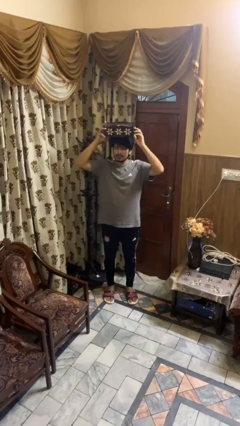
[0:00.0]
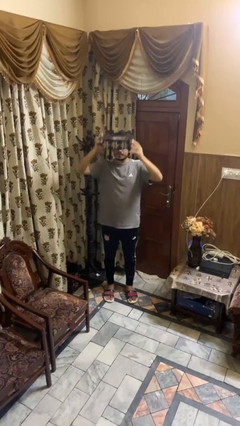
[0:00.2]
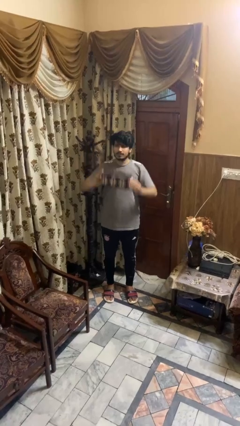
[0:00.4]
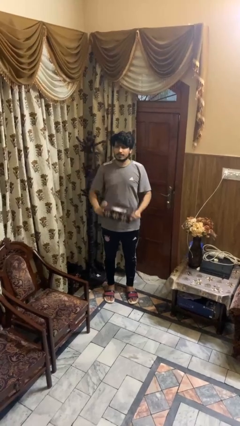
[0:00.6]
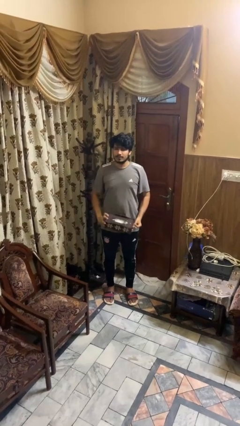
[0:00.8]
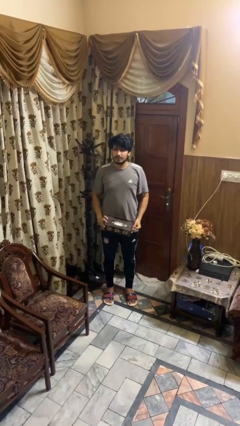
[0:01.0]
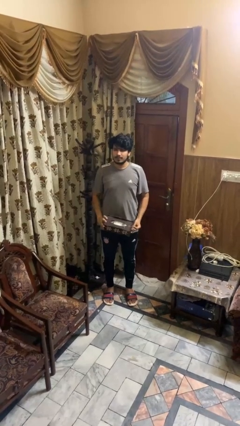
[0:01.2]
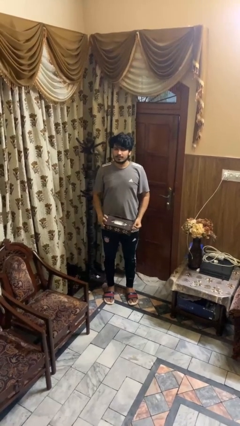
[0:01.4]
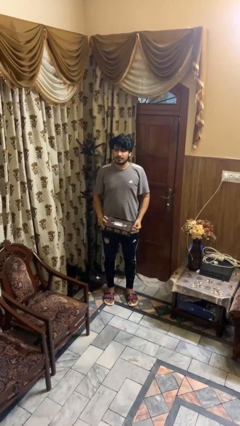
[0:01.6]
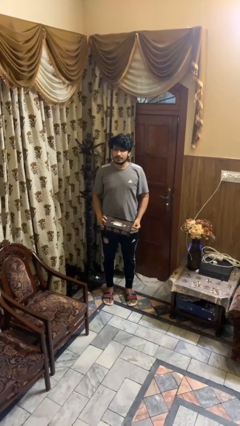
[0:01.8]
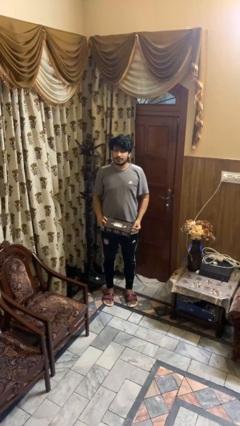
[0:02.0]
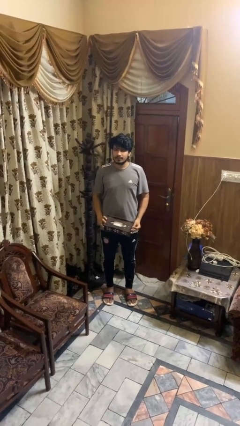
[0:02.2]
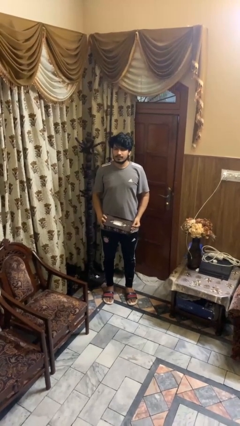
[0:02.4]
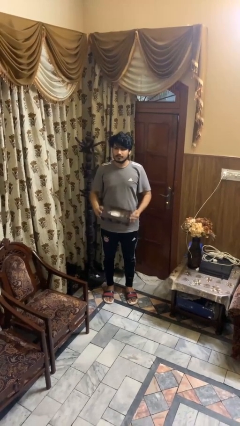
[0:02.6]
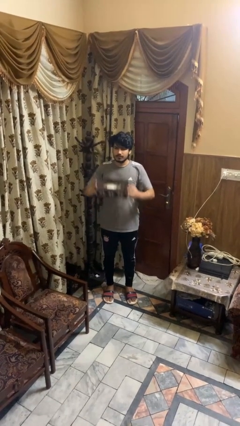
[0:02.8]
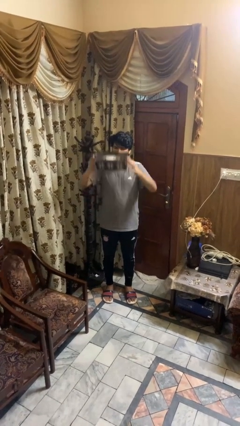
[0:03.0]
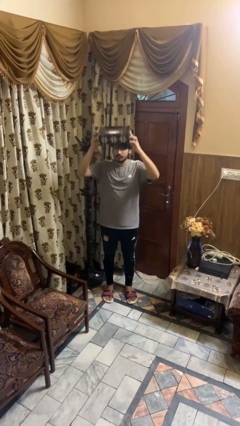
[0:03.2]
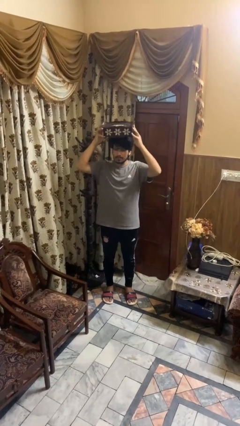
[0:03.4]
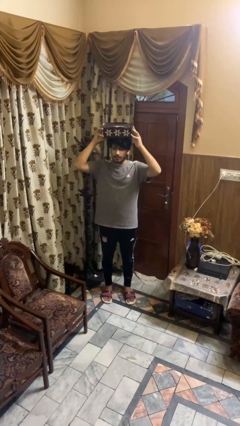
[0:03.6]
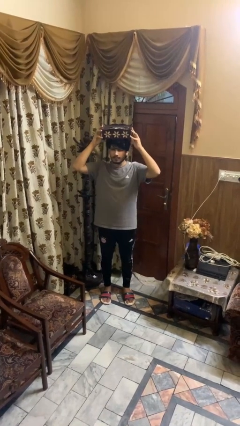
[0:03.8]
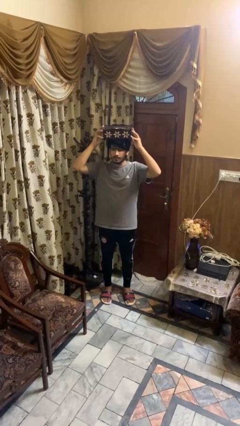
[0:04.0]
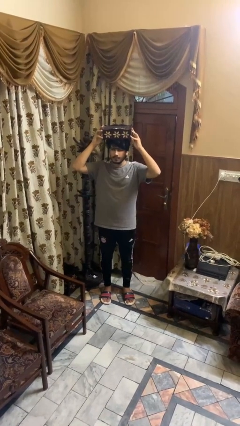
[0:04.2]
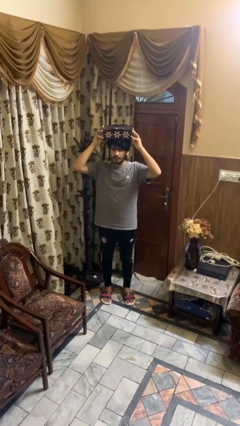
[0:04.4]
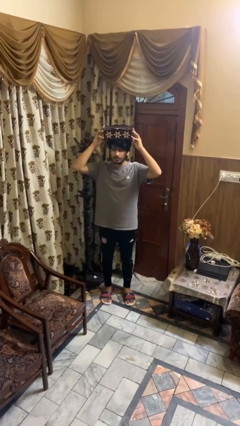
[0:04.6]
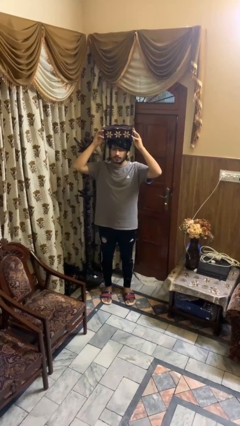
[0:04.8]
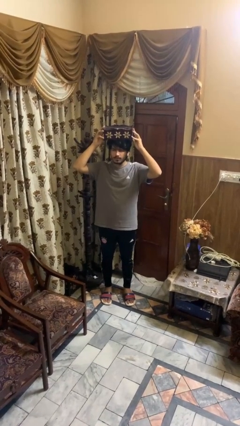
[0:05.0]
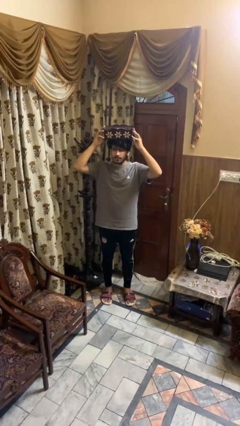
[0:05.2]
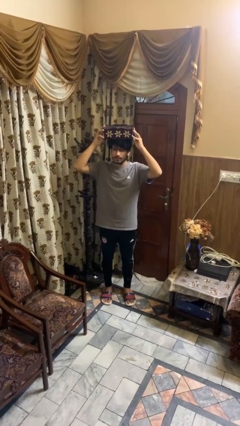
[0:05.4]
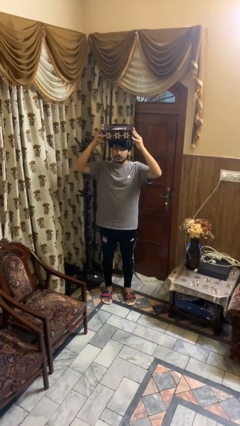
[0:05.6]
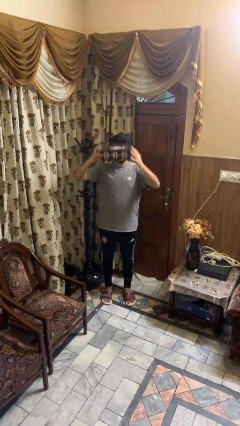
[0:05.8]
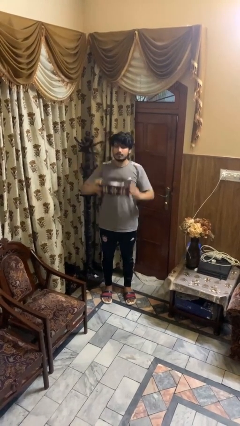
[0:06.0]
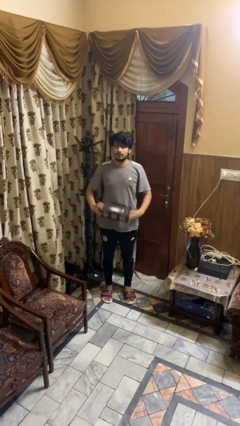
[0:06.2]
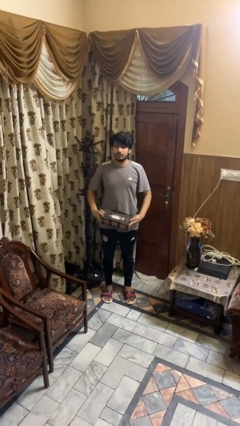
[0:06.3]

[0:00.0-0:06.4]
person holds object above head

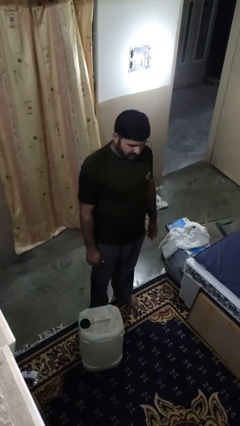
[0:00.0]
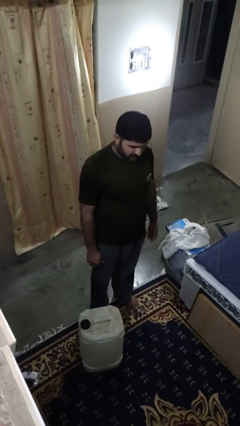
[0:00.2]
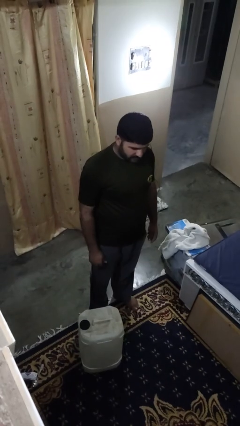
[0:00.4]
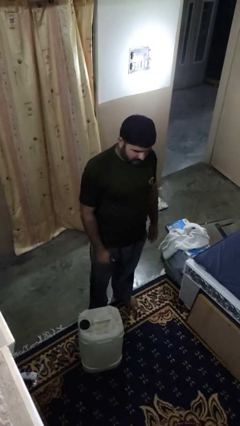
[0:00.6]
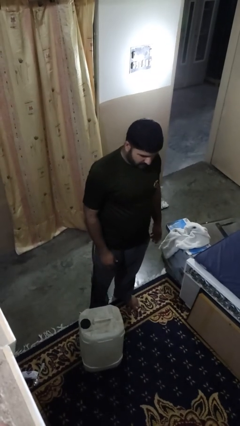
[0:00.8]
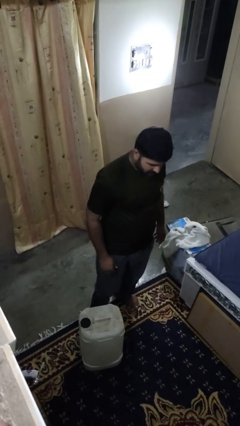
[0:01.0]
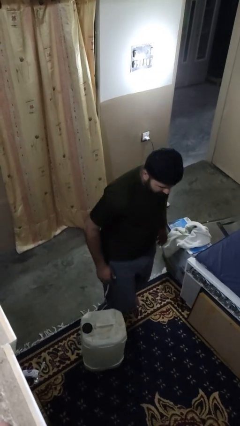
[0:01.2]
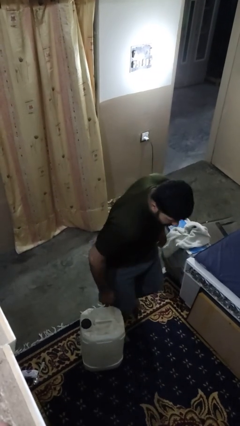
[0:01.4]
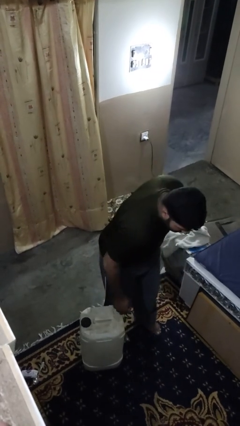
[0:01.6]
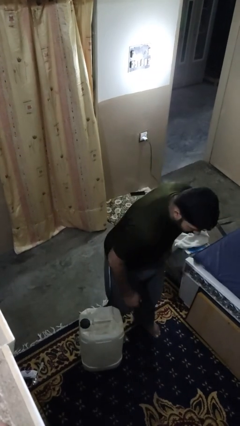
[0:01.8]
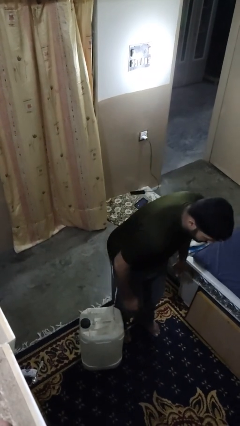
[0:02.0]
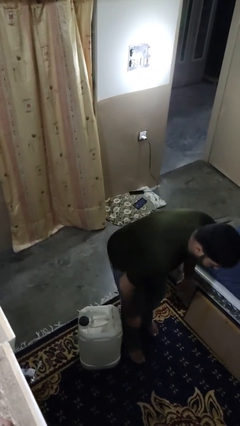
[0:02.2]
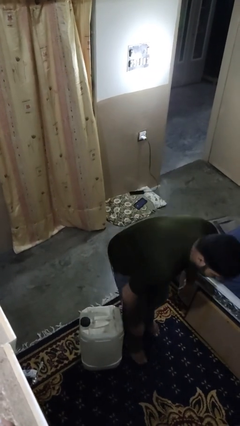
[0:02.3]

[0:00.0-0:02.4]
person trips on object on floor

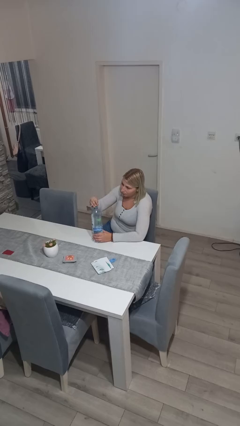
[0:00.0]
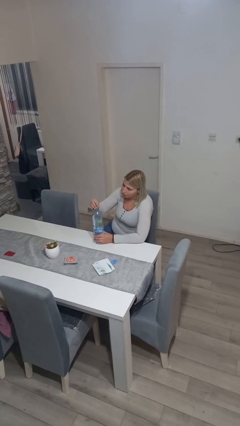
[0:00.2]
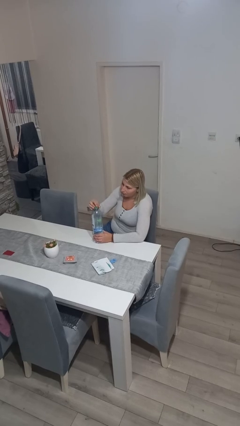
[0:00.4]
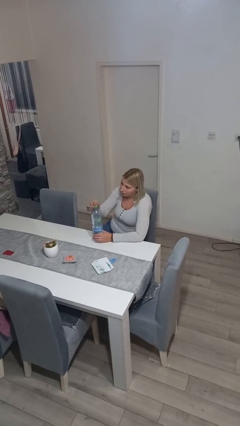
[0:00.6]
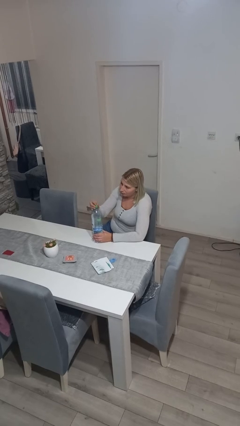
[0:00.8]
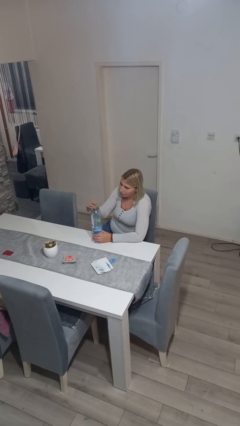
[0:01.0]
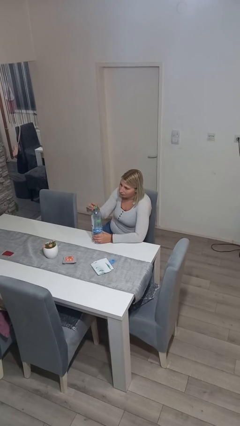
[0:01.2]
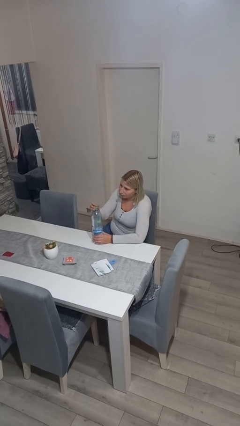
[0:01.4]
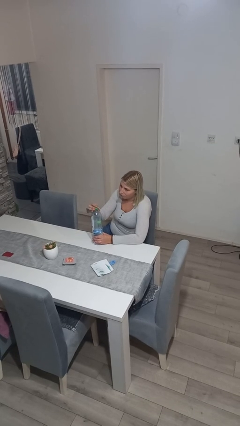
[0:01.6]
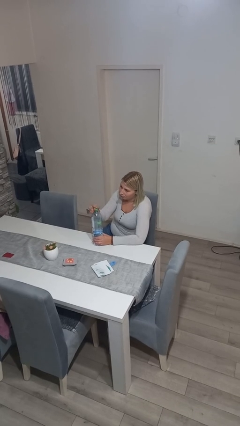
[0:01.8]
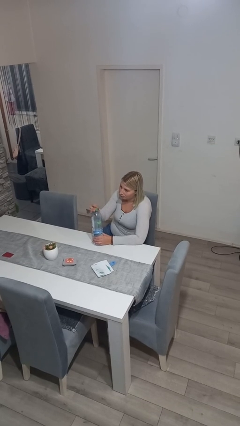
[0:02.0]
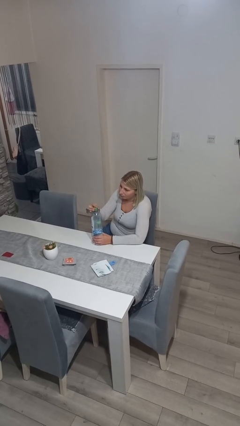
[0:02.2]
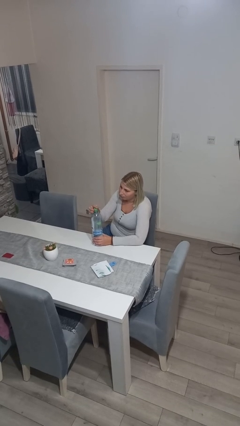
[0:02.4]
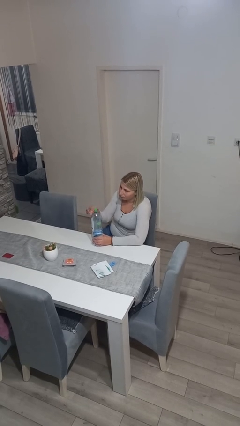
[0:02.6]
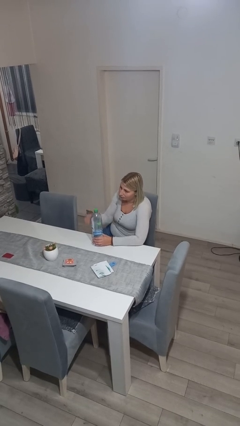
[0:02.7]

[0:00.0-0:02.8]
person screws lid to bottle

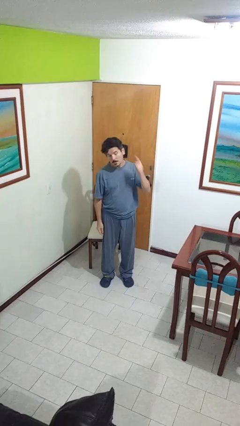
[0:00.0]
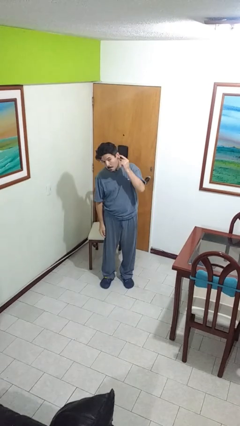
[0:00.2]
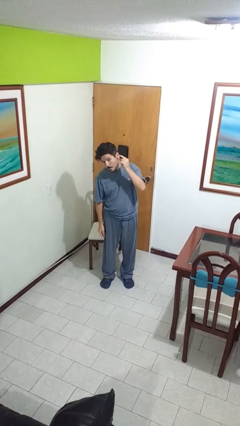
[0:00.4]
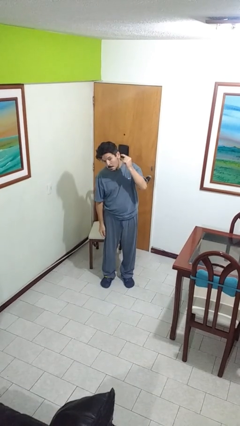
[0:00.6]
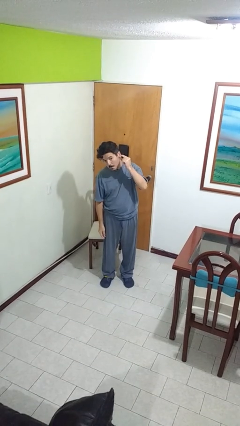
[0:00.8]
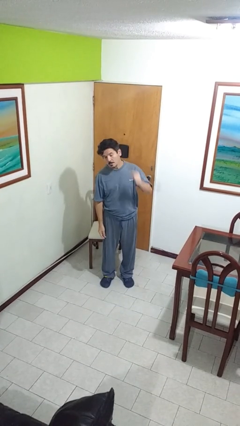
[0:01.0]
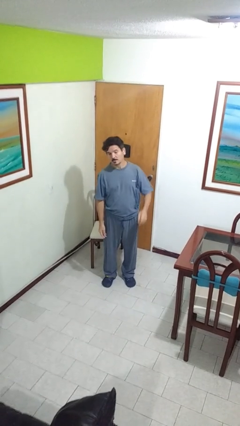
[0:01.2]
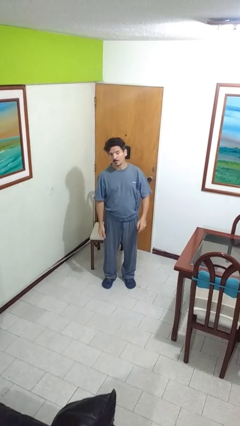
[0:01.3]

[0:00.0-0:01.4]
person gestures listen closely

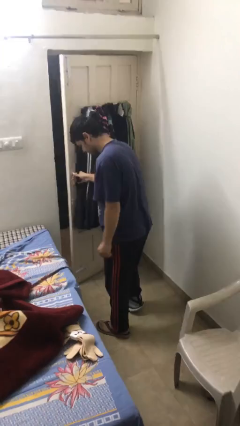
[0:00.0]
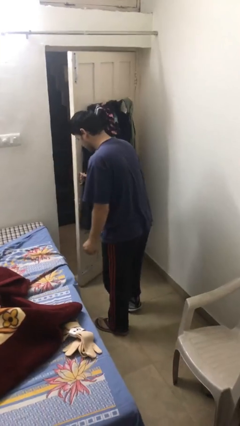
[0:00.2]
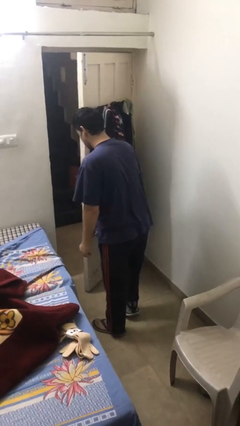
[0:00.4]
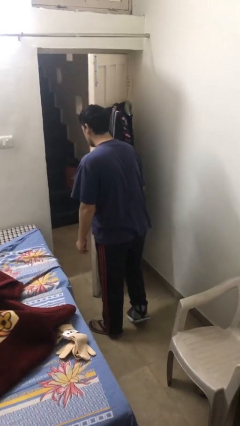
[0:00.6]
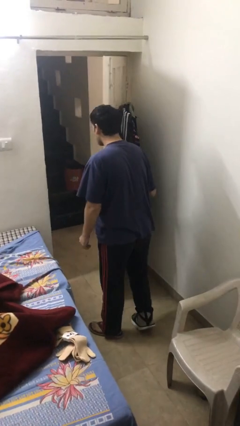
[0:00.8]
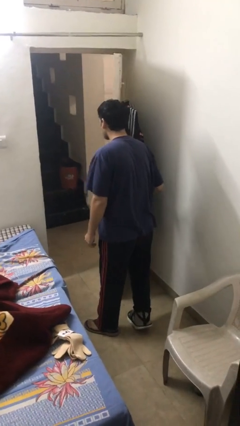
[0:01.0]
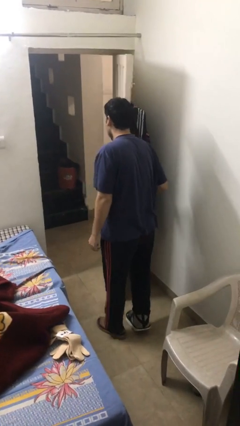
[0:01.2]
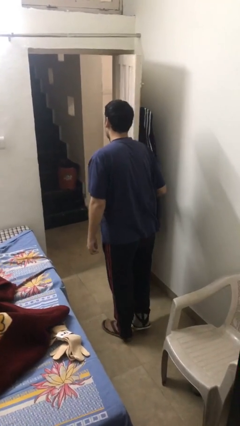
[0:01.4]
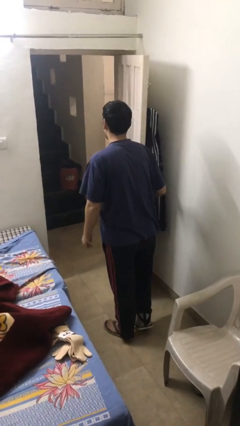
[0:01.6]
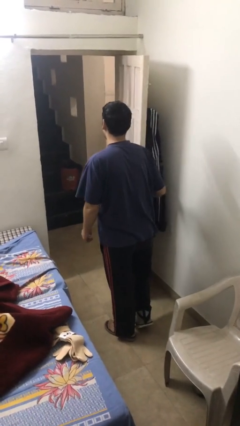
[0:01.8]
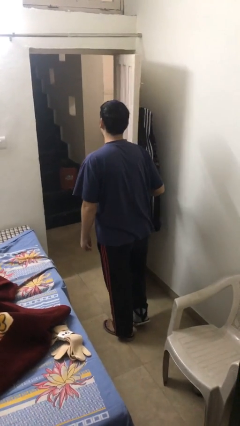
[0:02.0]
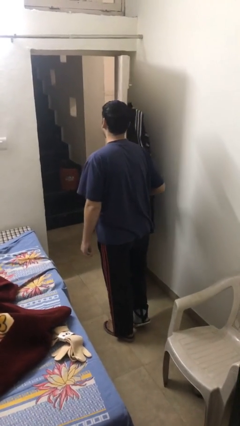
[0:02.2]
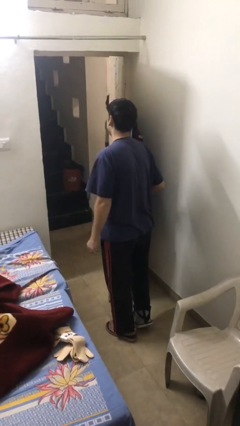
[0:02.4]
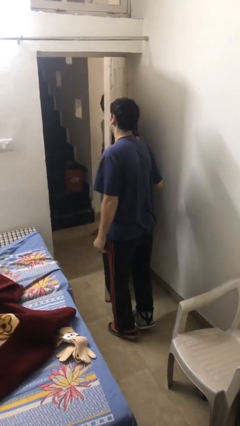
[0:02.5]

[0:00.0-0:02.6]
person opens facility door

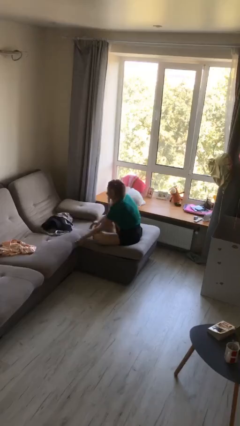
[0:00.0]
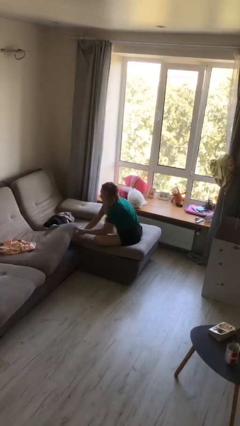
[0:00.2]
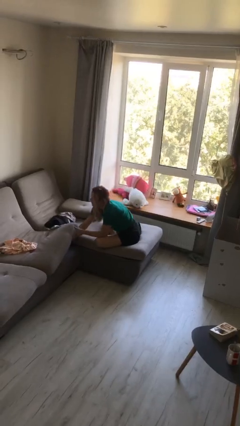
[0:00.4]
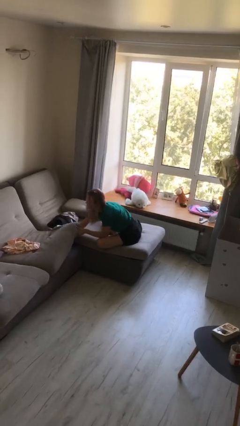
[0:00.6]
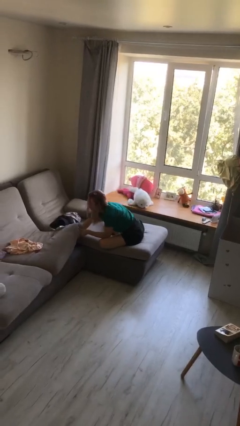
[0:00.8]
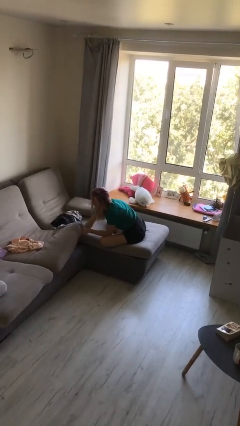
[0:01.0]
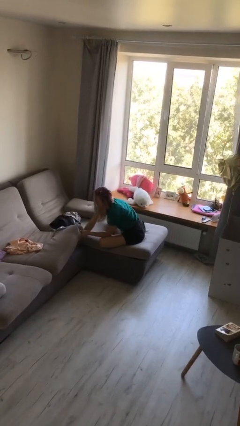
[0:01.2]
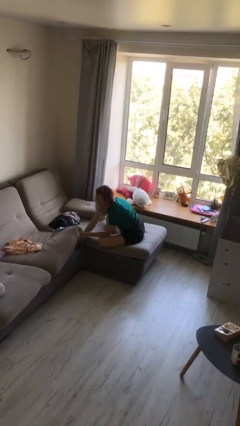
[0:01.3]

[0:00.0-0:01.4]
person searches in couch

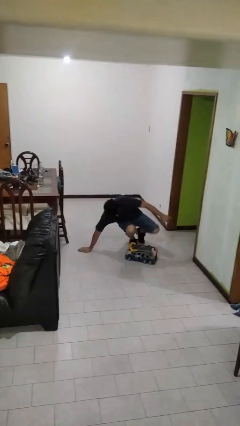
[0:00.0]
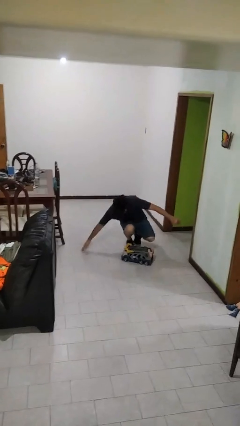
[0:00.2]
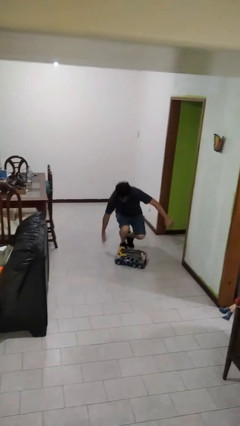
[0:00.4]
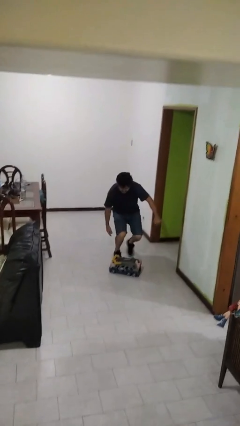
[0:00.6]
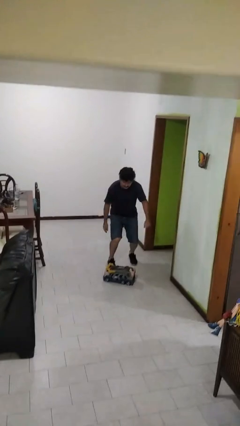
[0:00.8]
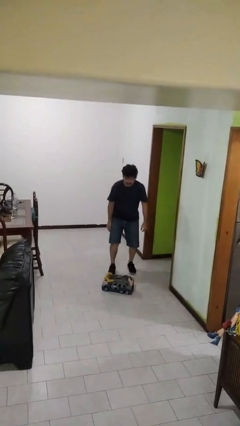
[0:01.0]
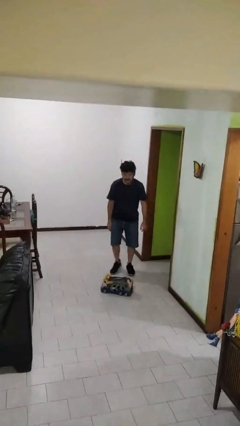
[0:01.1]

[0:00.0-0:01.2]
person stands up from floor
